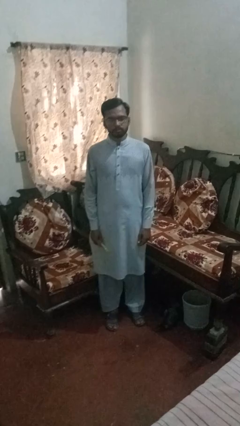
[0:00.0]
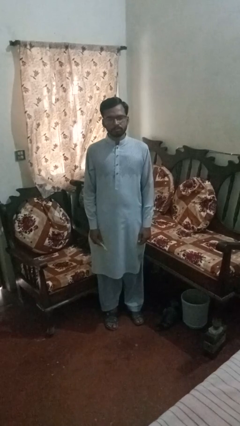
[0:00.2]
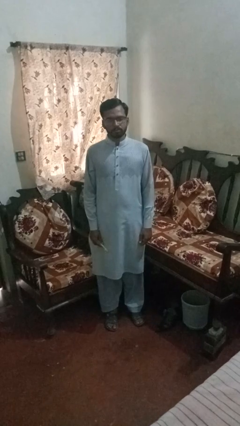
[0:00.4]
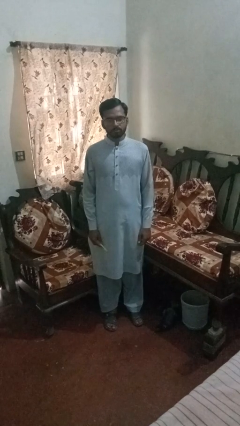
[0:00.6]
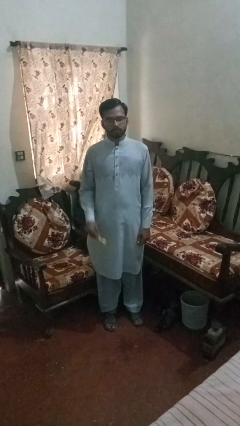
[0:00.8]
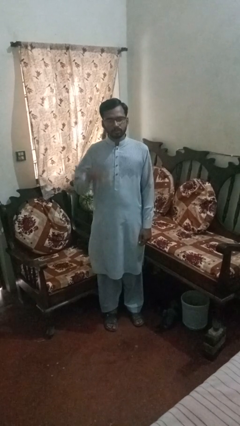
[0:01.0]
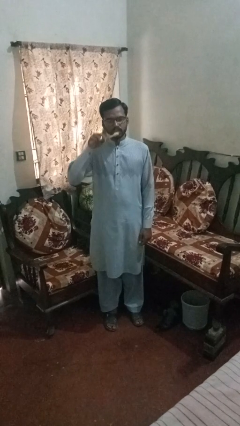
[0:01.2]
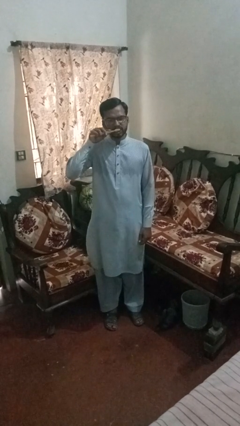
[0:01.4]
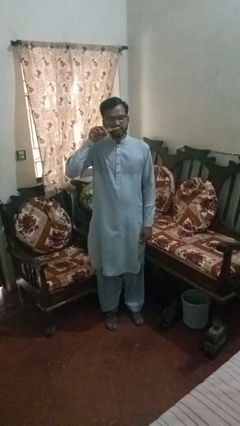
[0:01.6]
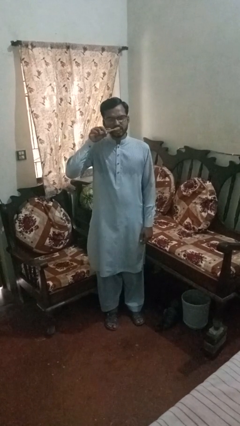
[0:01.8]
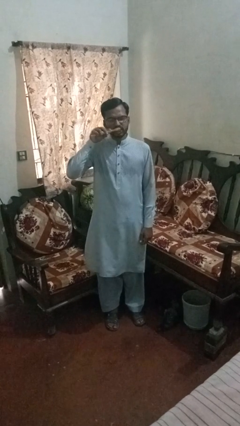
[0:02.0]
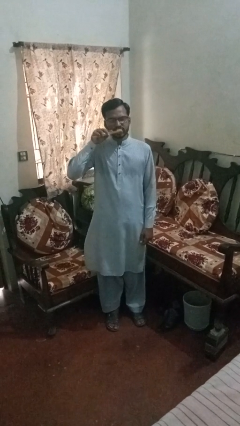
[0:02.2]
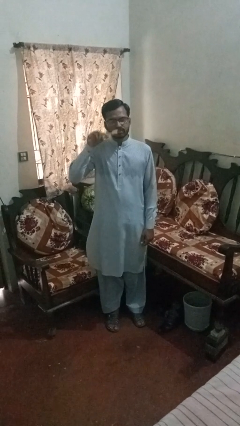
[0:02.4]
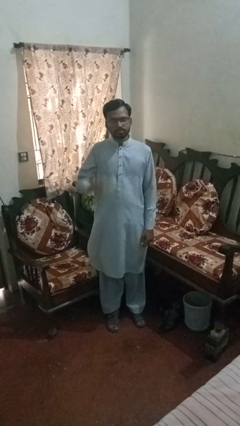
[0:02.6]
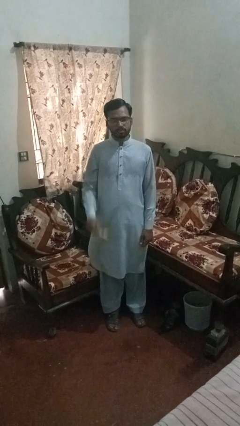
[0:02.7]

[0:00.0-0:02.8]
person brushes teeth

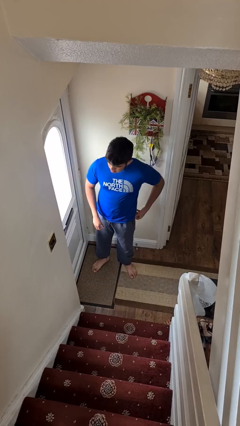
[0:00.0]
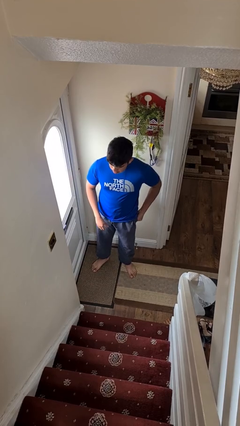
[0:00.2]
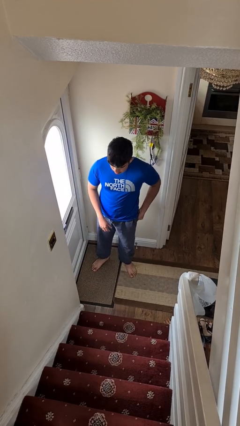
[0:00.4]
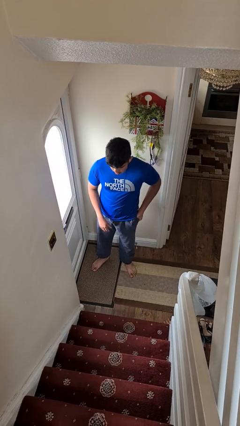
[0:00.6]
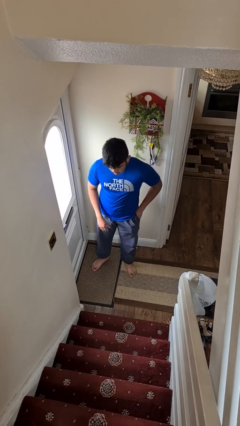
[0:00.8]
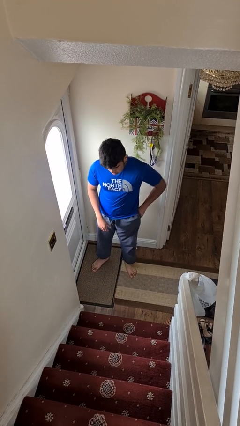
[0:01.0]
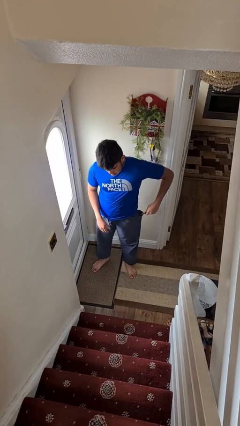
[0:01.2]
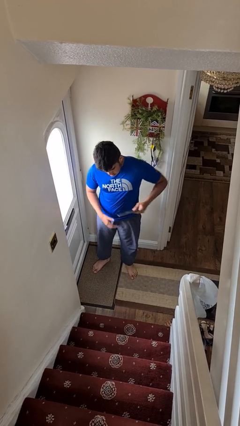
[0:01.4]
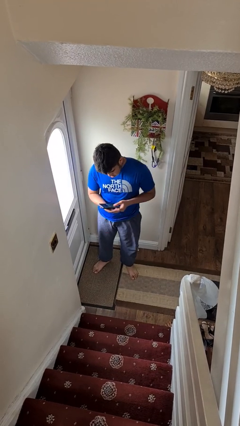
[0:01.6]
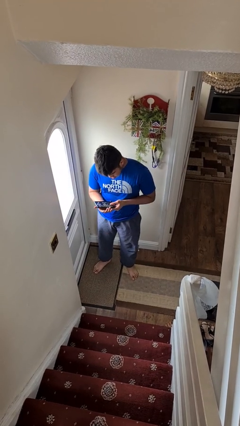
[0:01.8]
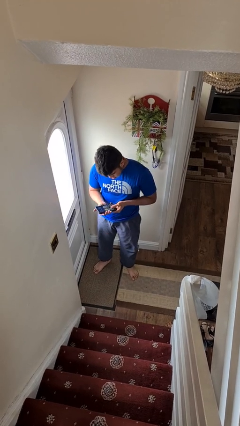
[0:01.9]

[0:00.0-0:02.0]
person takes phone from pocket

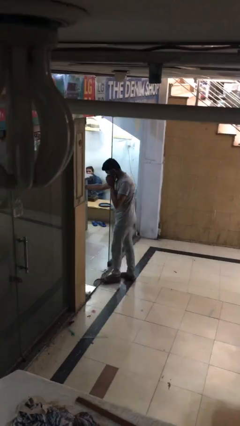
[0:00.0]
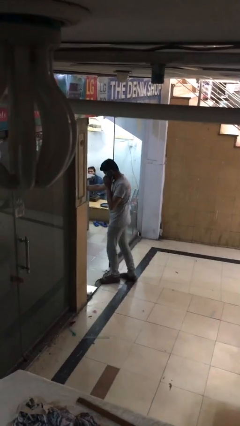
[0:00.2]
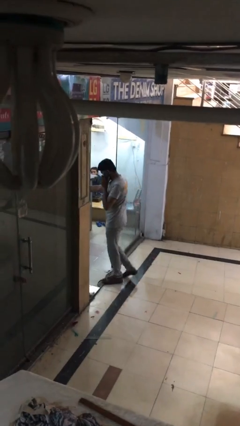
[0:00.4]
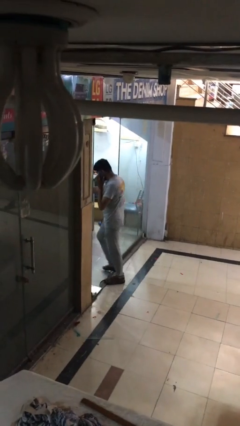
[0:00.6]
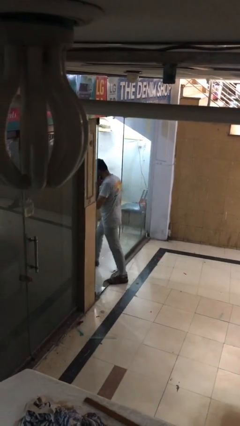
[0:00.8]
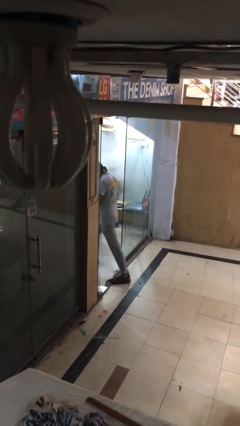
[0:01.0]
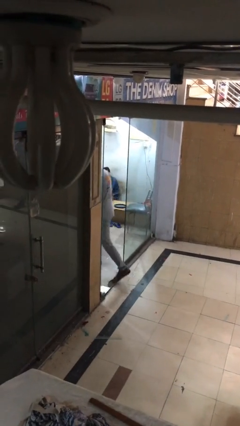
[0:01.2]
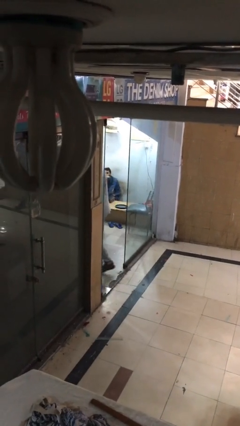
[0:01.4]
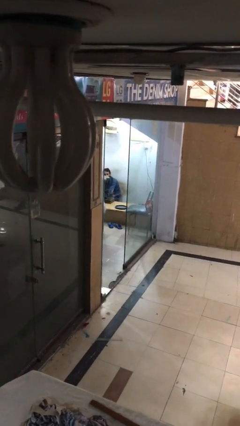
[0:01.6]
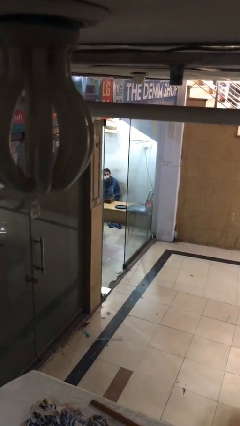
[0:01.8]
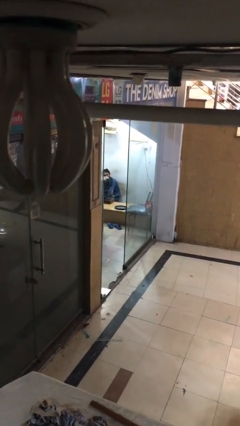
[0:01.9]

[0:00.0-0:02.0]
person exits scene through structure

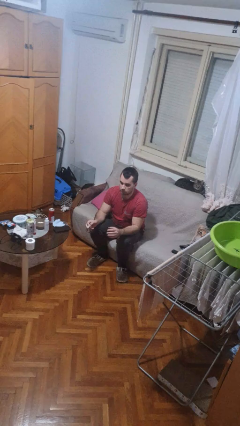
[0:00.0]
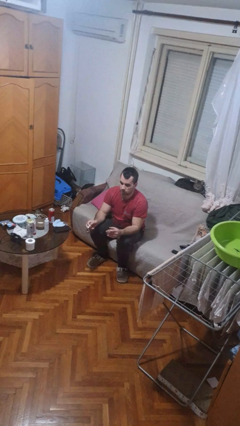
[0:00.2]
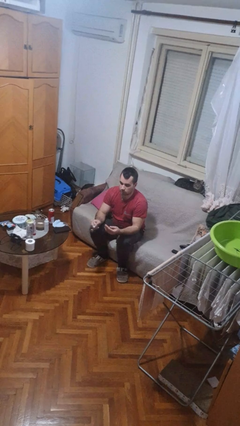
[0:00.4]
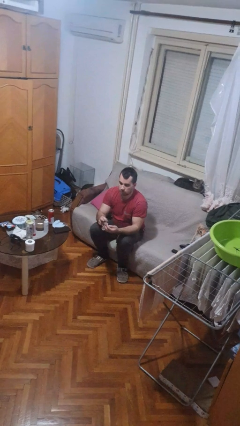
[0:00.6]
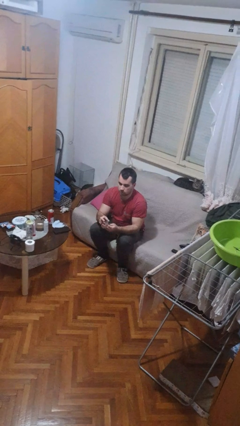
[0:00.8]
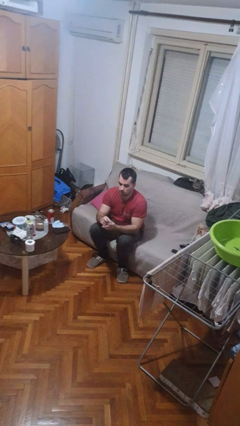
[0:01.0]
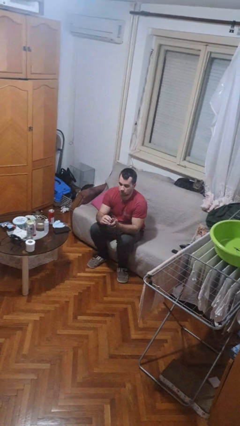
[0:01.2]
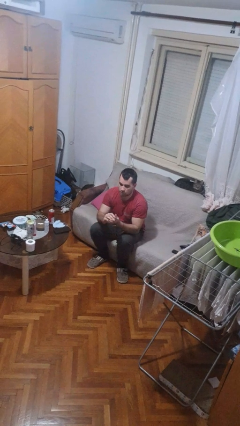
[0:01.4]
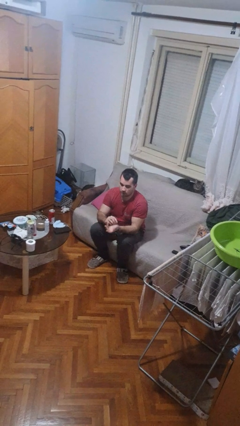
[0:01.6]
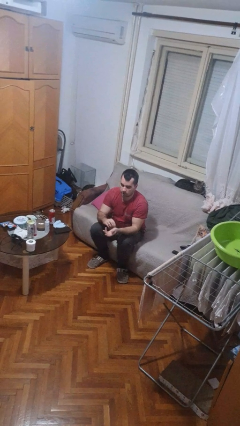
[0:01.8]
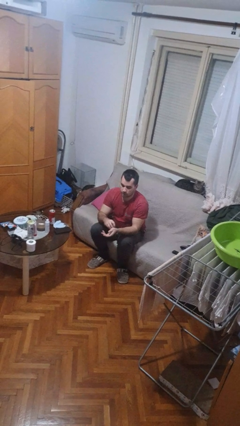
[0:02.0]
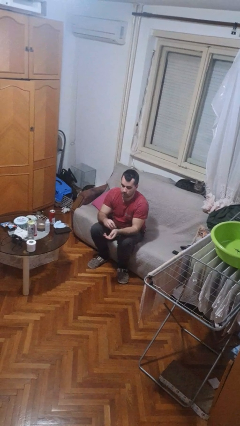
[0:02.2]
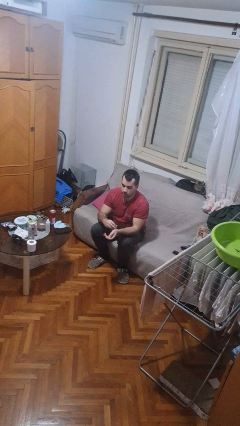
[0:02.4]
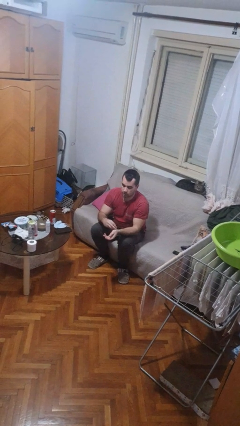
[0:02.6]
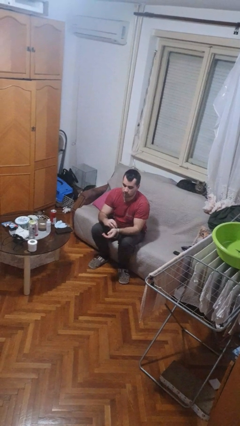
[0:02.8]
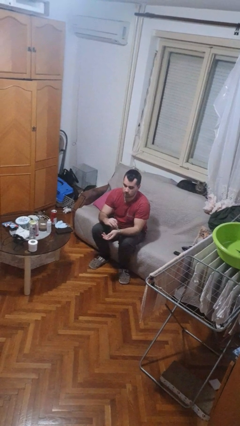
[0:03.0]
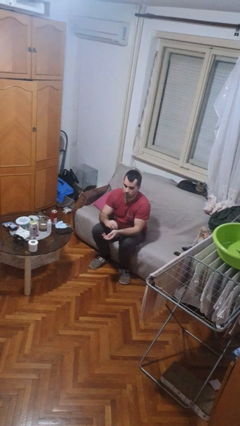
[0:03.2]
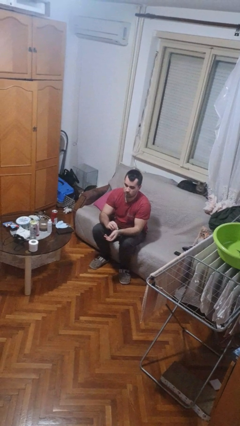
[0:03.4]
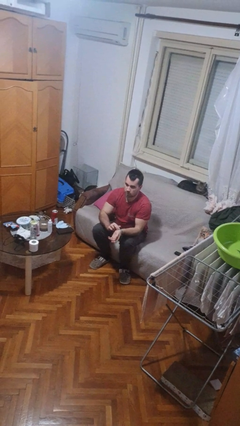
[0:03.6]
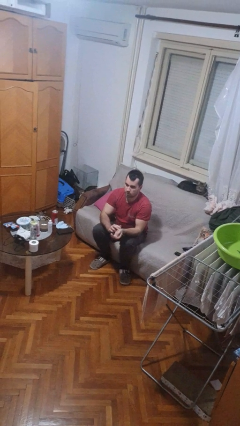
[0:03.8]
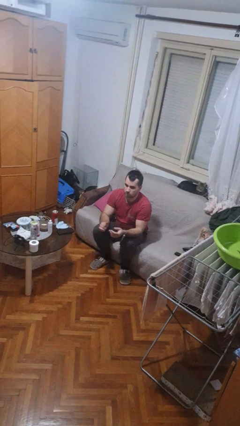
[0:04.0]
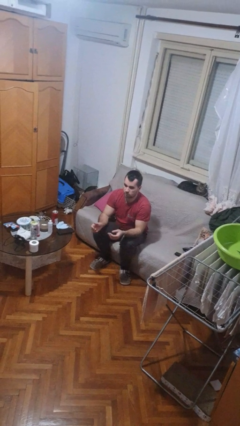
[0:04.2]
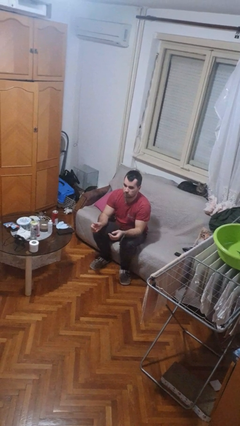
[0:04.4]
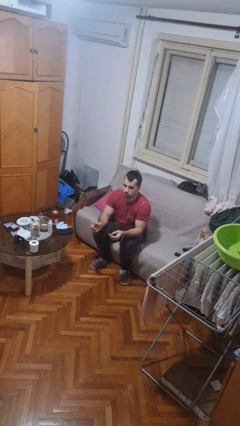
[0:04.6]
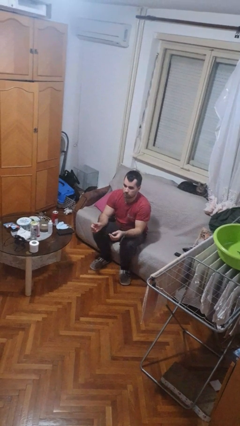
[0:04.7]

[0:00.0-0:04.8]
person puts on wristwatch

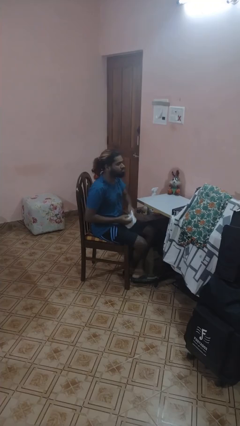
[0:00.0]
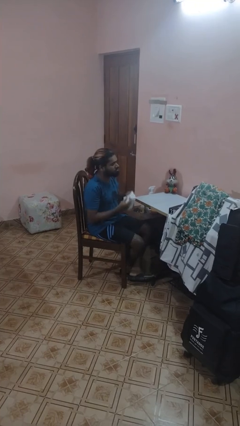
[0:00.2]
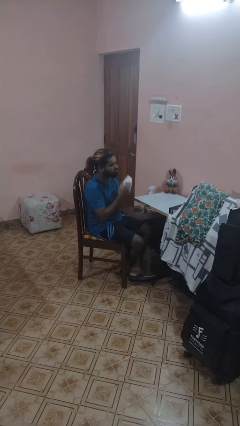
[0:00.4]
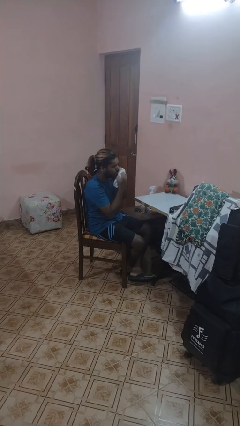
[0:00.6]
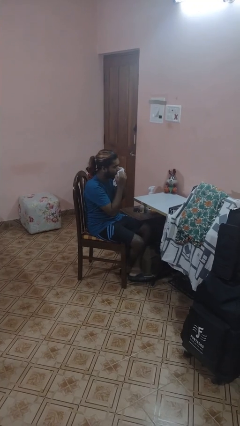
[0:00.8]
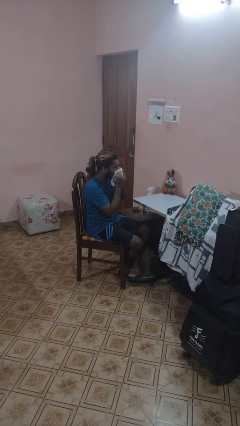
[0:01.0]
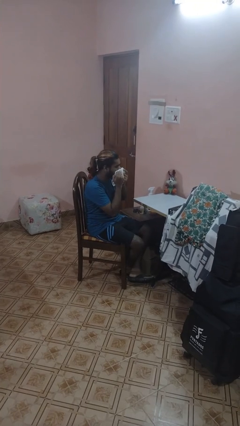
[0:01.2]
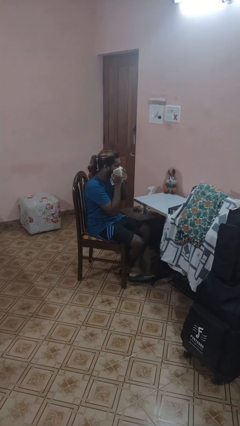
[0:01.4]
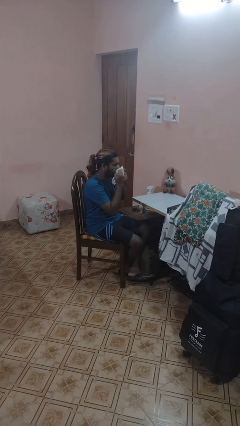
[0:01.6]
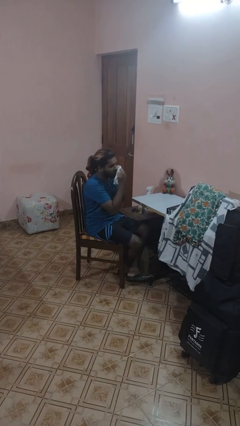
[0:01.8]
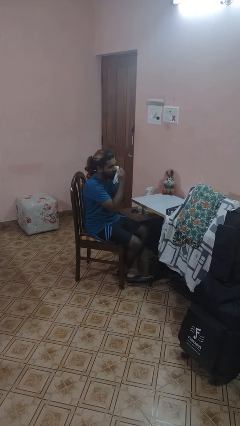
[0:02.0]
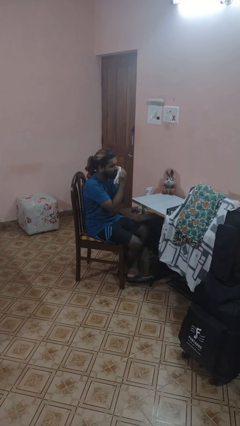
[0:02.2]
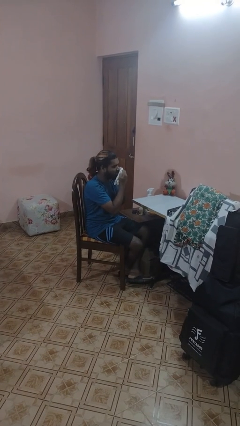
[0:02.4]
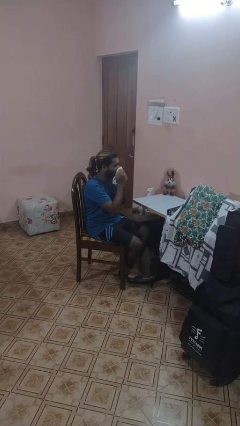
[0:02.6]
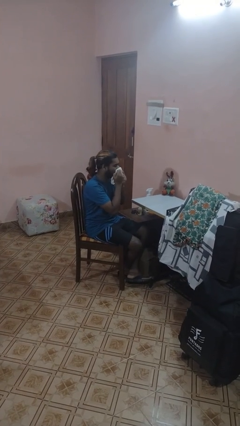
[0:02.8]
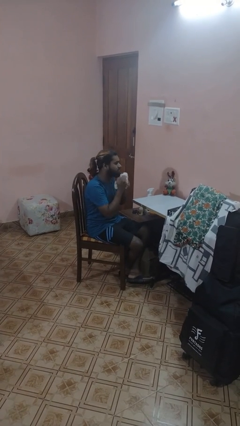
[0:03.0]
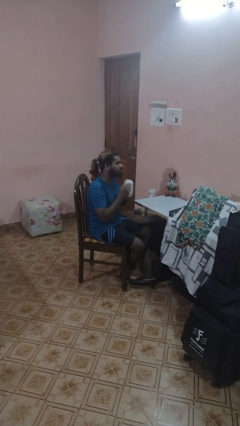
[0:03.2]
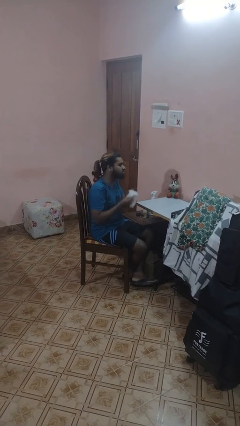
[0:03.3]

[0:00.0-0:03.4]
person wipes mouth with napkin

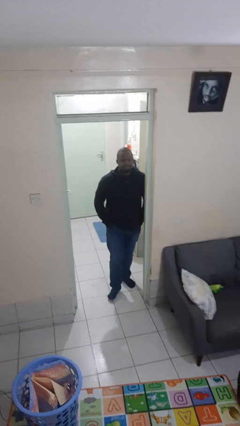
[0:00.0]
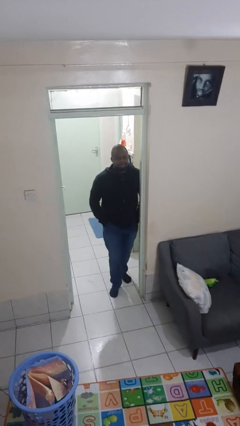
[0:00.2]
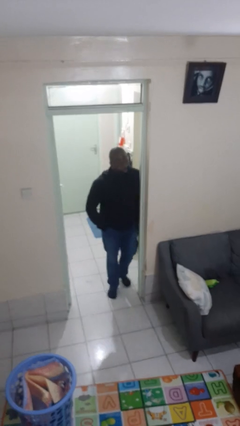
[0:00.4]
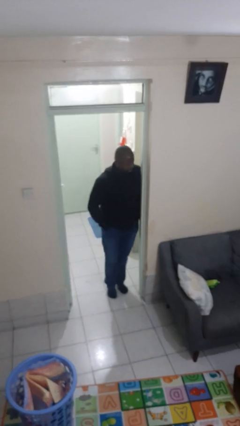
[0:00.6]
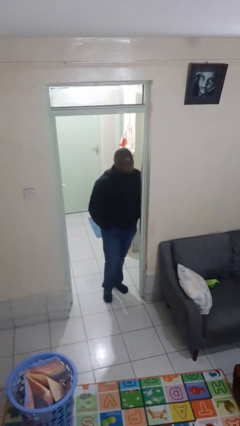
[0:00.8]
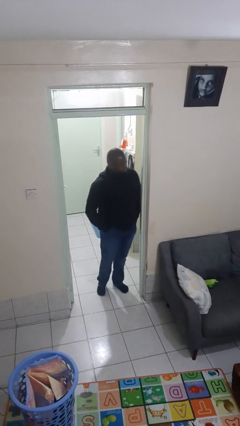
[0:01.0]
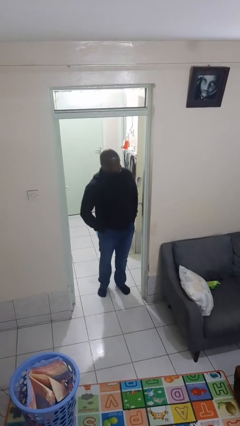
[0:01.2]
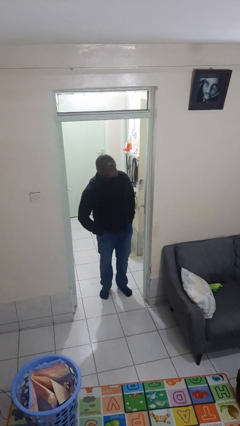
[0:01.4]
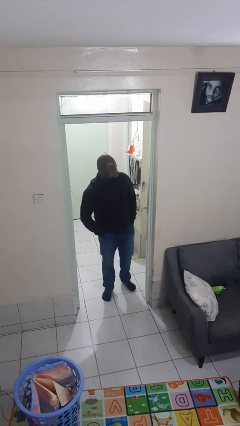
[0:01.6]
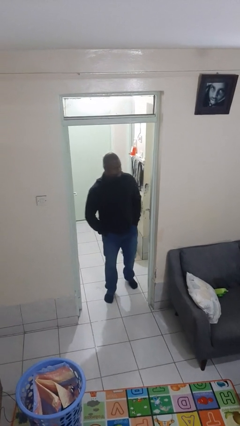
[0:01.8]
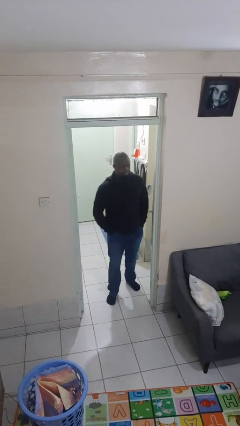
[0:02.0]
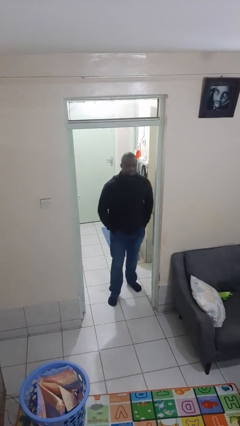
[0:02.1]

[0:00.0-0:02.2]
person bumps into wall

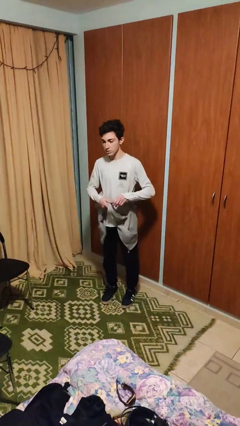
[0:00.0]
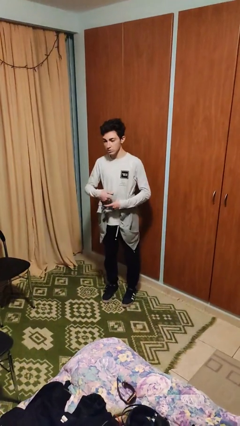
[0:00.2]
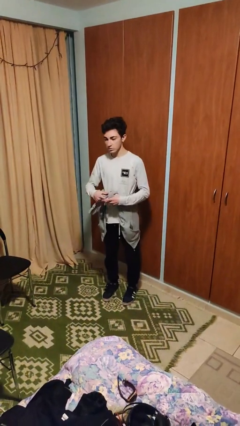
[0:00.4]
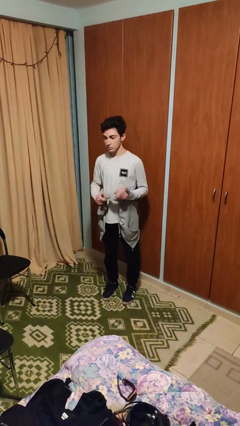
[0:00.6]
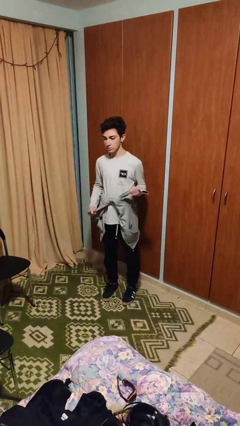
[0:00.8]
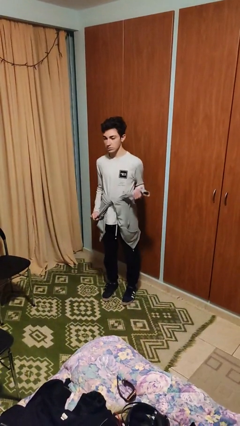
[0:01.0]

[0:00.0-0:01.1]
person ties jacket around waist
